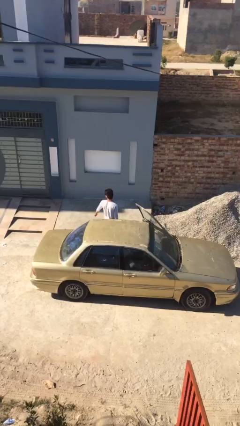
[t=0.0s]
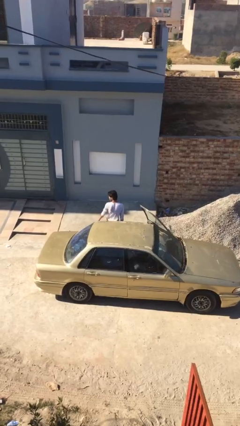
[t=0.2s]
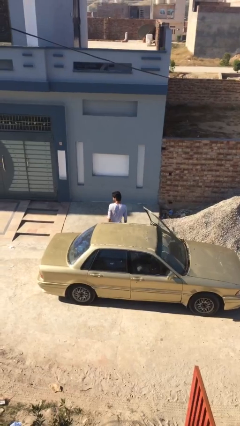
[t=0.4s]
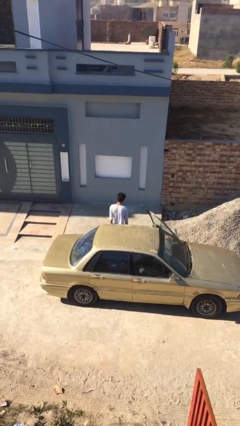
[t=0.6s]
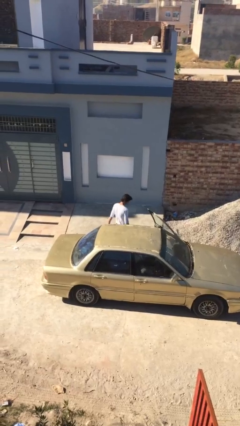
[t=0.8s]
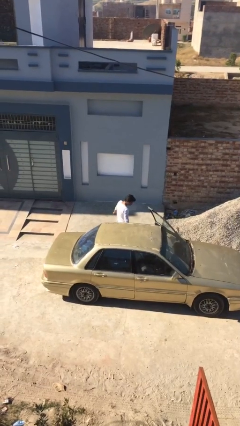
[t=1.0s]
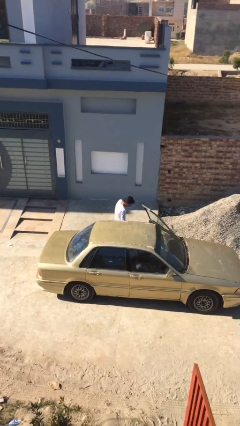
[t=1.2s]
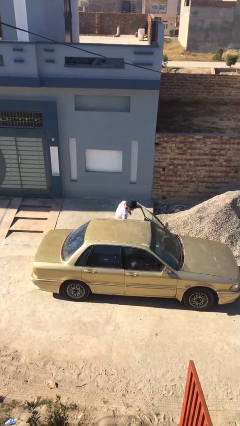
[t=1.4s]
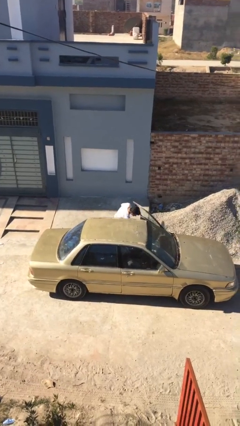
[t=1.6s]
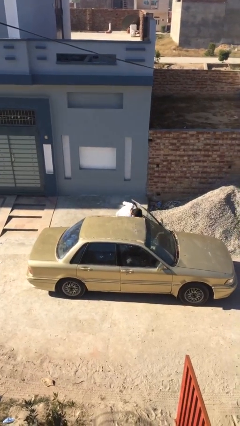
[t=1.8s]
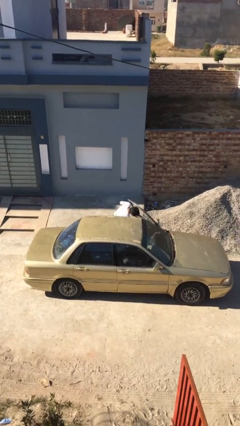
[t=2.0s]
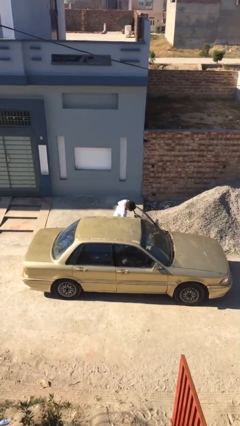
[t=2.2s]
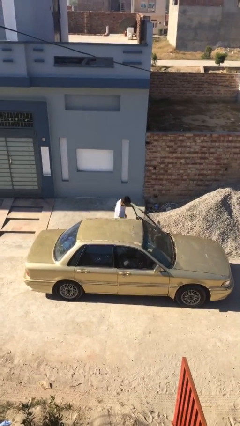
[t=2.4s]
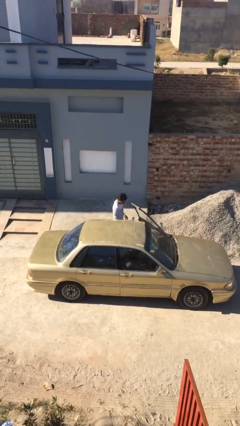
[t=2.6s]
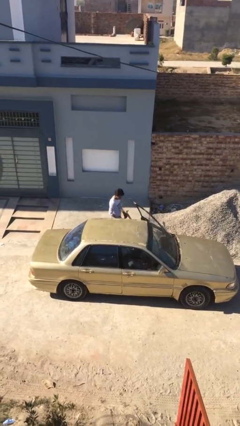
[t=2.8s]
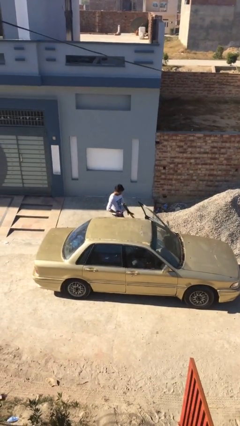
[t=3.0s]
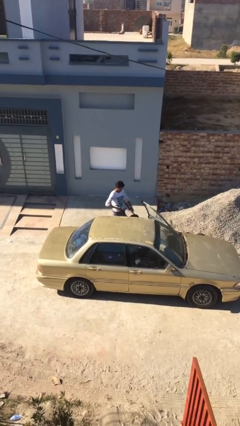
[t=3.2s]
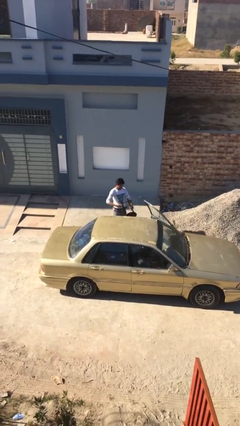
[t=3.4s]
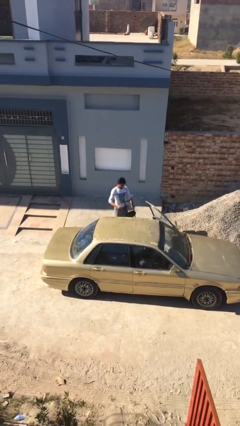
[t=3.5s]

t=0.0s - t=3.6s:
person unloads car

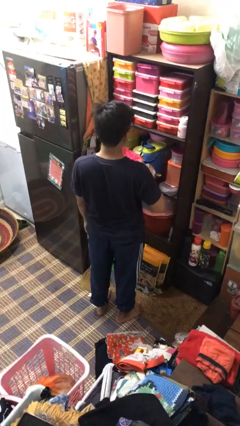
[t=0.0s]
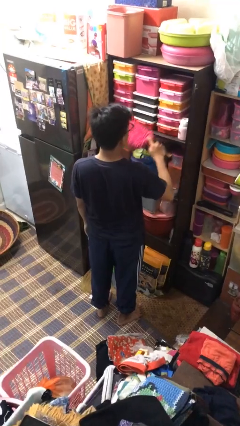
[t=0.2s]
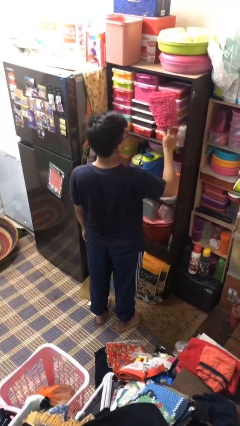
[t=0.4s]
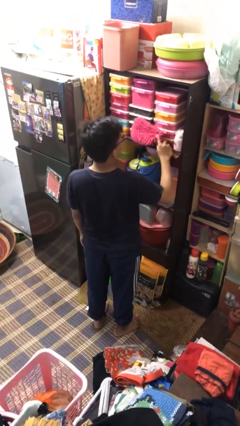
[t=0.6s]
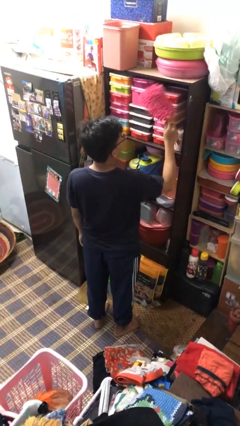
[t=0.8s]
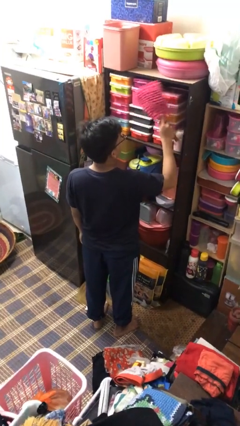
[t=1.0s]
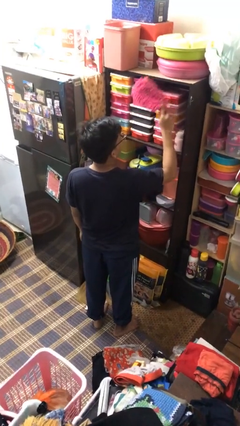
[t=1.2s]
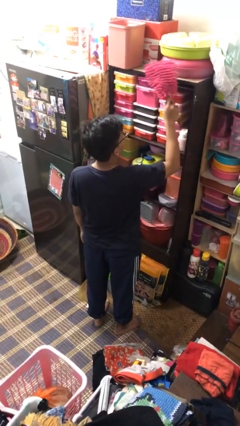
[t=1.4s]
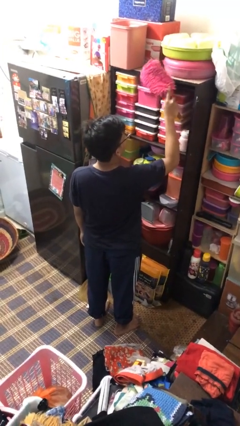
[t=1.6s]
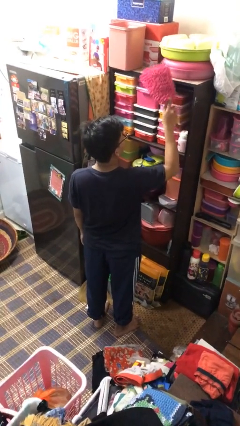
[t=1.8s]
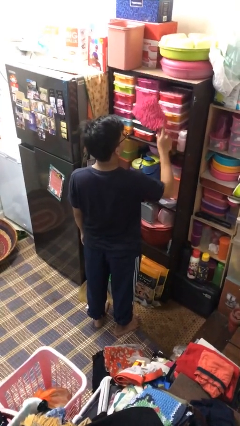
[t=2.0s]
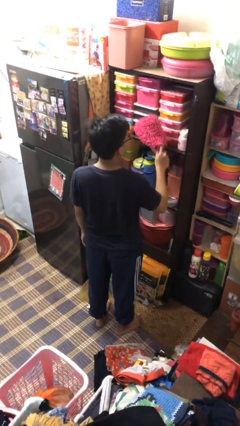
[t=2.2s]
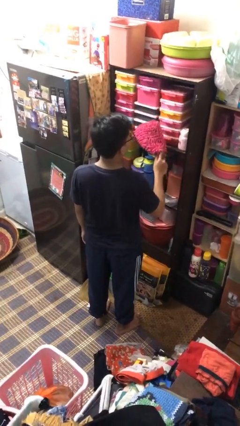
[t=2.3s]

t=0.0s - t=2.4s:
person dusts furniture

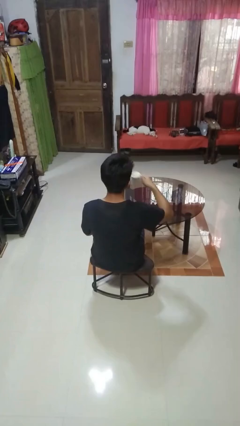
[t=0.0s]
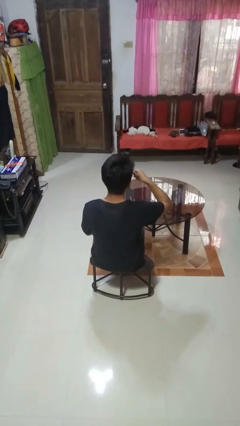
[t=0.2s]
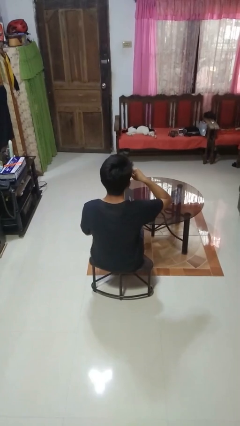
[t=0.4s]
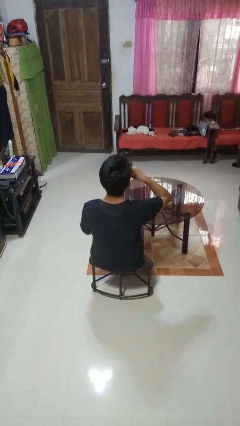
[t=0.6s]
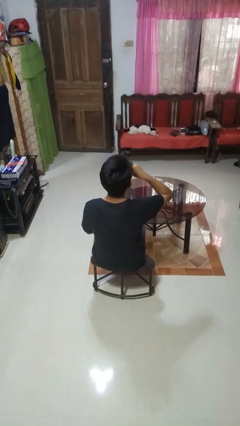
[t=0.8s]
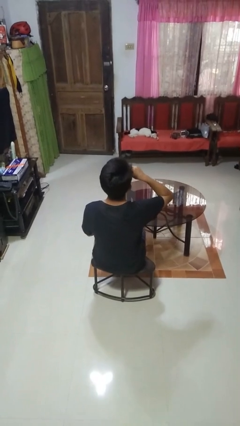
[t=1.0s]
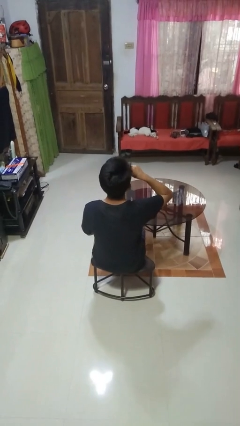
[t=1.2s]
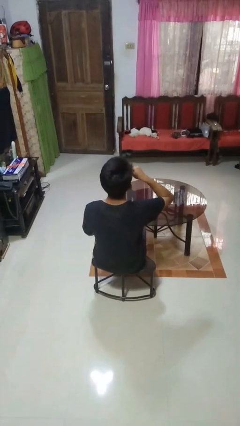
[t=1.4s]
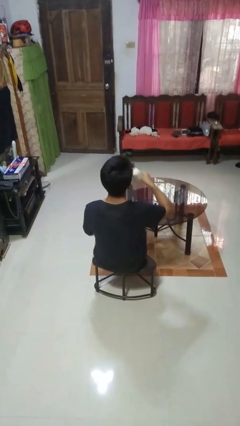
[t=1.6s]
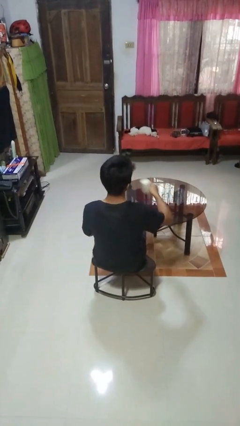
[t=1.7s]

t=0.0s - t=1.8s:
person drinks from mug

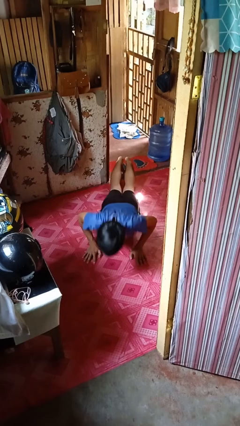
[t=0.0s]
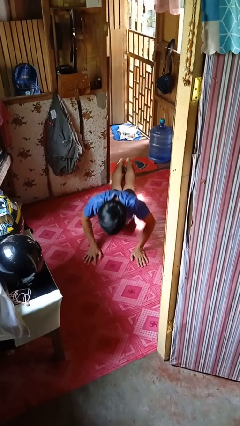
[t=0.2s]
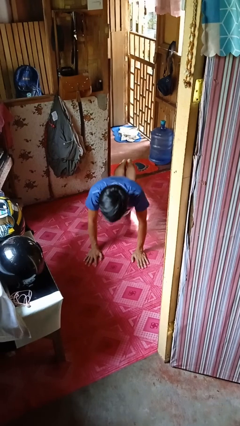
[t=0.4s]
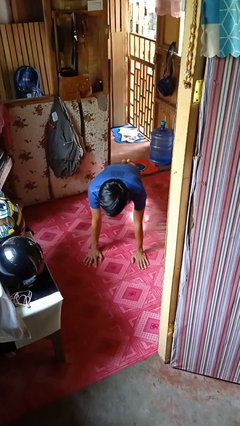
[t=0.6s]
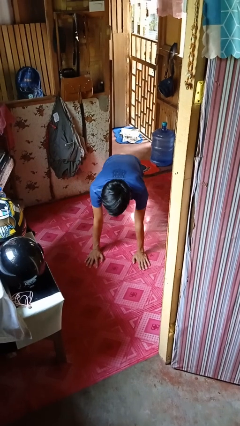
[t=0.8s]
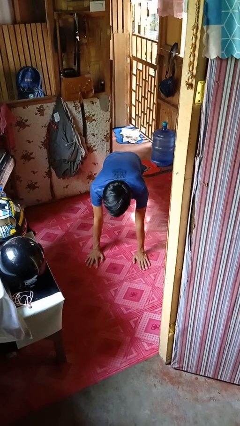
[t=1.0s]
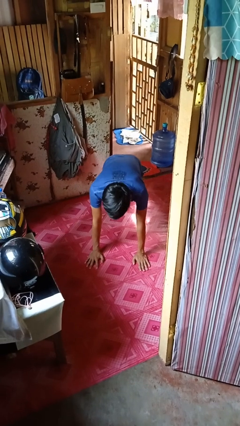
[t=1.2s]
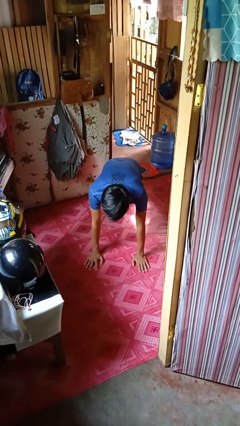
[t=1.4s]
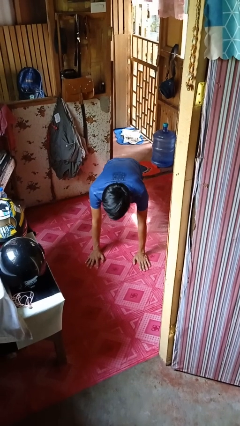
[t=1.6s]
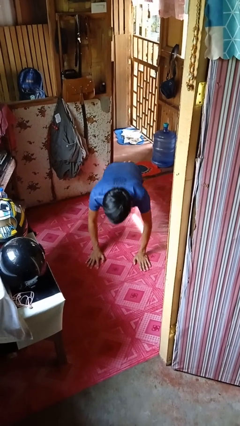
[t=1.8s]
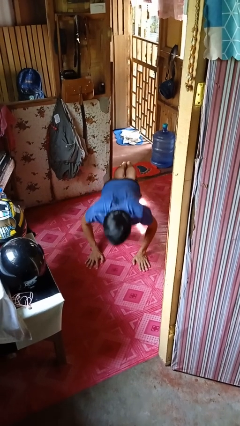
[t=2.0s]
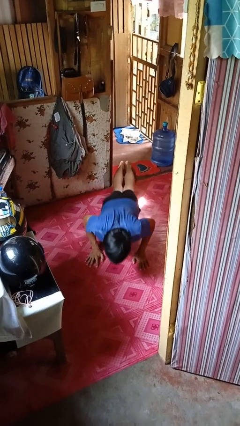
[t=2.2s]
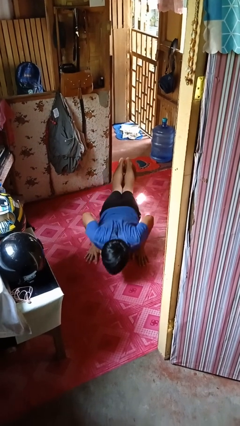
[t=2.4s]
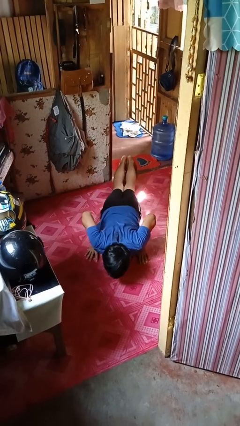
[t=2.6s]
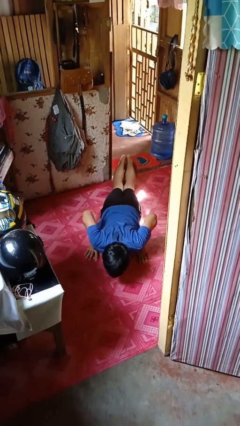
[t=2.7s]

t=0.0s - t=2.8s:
person exercises with pushup

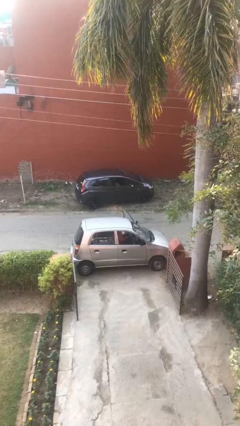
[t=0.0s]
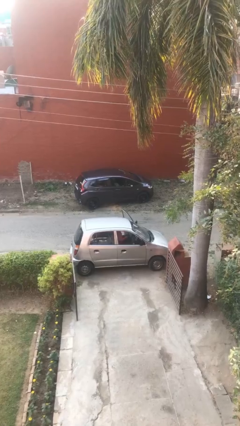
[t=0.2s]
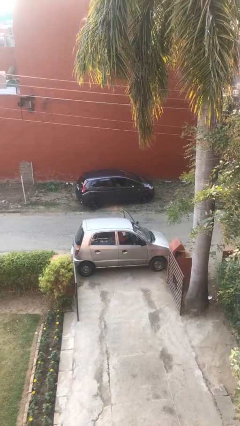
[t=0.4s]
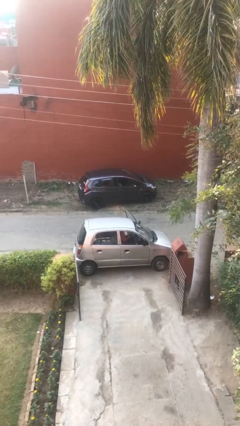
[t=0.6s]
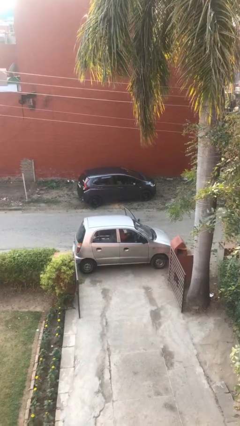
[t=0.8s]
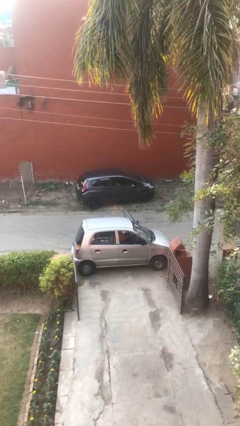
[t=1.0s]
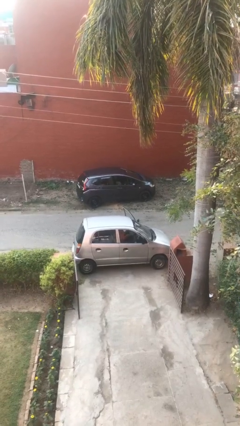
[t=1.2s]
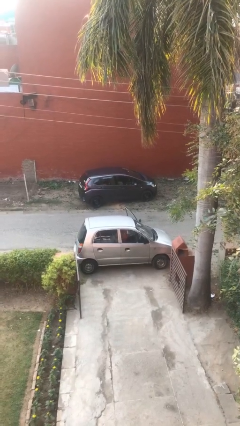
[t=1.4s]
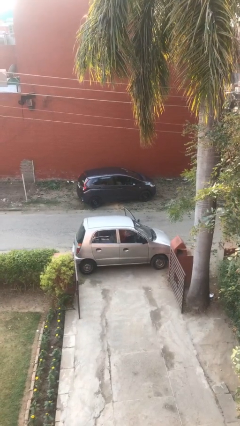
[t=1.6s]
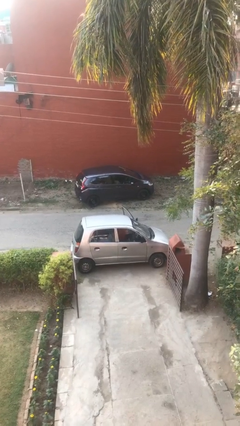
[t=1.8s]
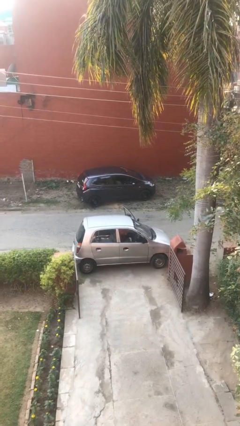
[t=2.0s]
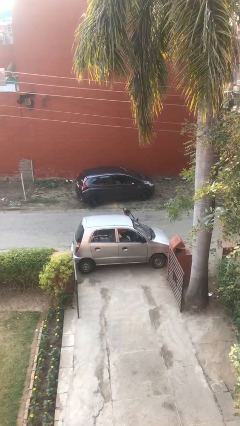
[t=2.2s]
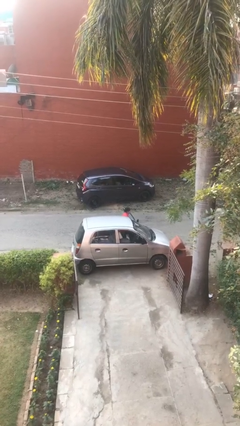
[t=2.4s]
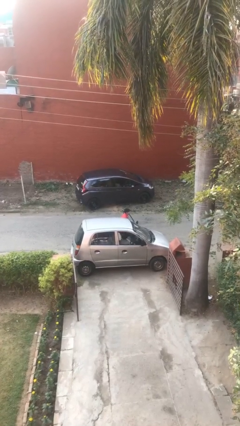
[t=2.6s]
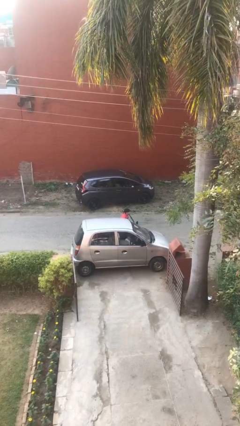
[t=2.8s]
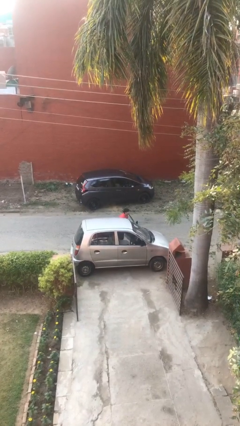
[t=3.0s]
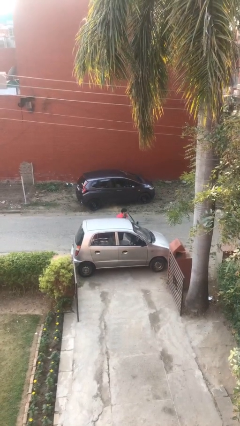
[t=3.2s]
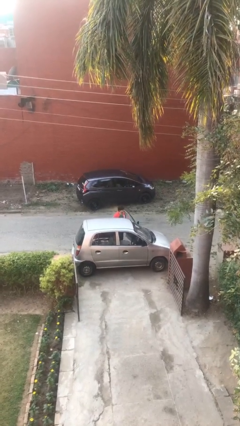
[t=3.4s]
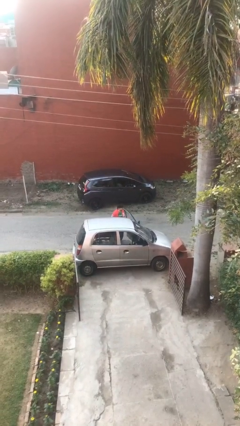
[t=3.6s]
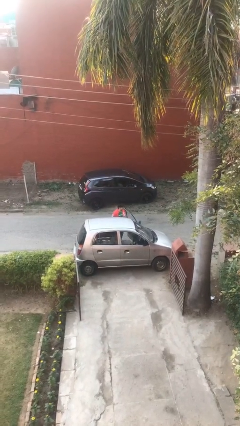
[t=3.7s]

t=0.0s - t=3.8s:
person exits car

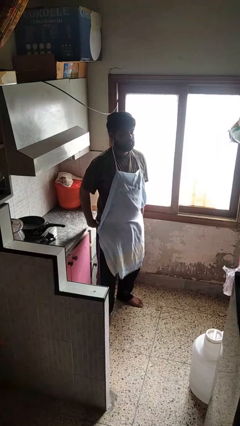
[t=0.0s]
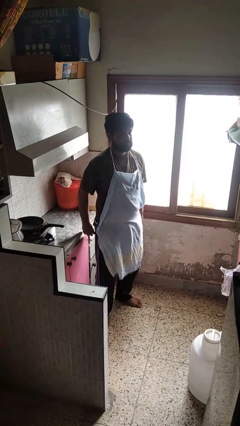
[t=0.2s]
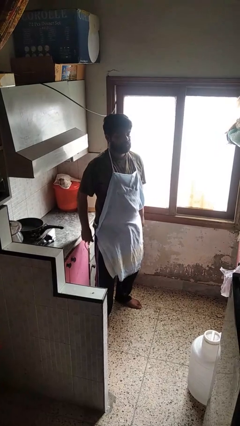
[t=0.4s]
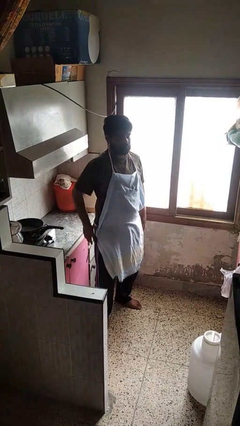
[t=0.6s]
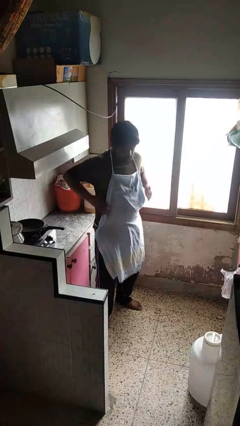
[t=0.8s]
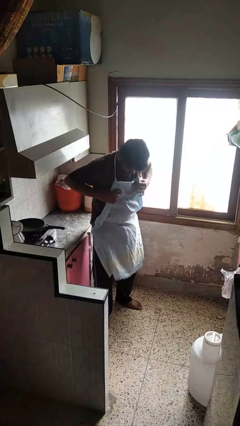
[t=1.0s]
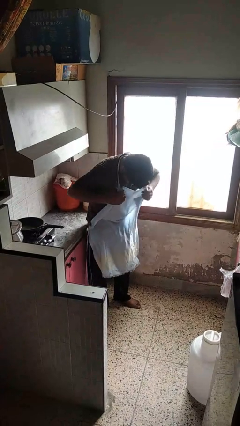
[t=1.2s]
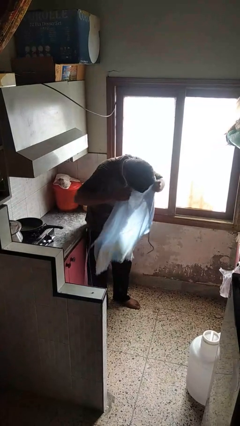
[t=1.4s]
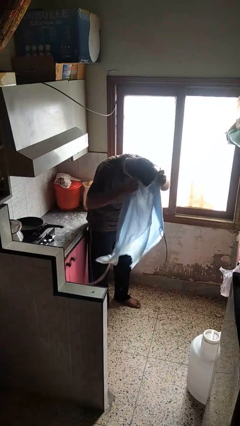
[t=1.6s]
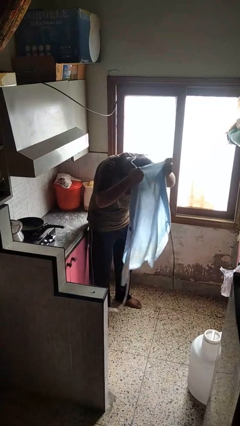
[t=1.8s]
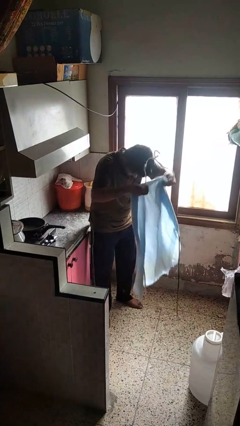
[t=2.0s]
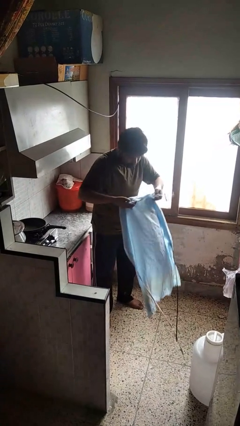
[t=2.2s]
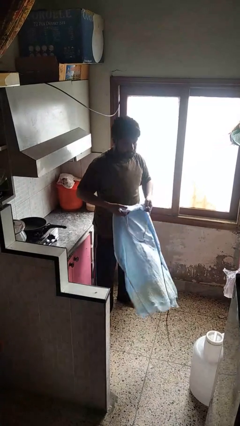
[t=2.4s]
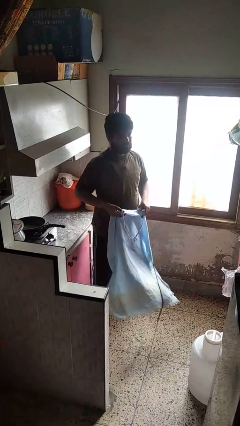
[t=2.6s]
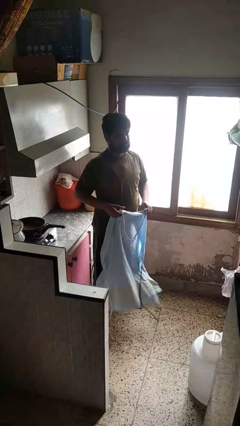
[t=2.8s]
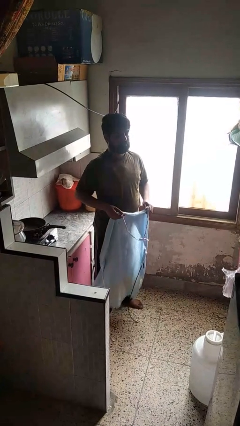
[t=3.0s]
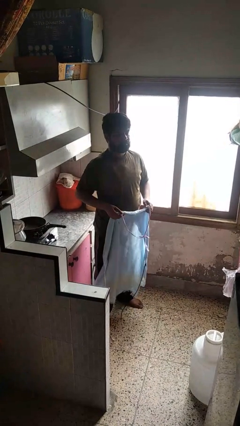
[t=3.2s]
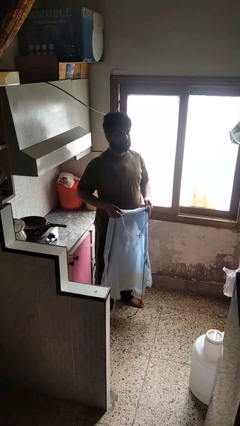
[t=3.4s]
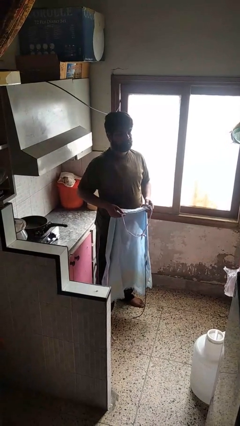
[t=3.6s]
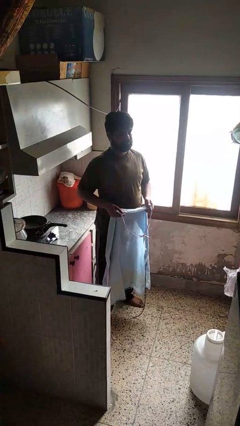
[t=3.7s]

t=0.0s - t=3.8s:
person takes off apron
